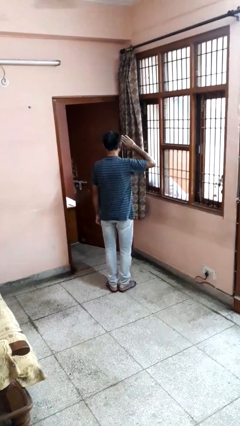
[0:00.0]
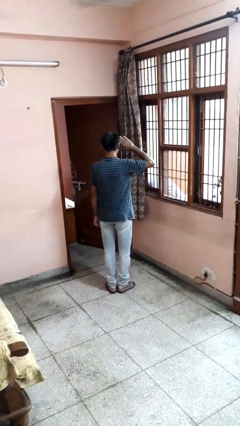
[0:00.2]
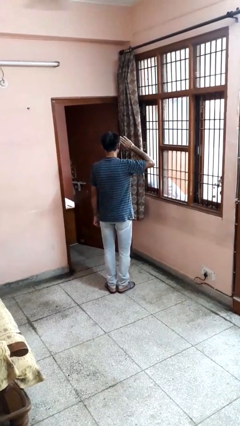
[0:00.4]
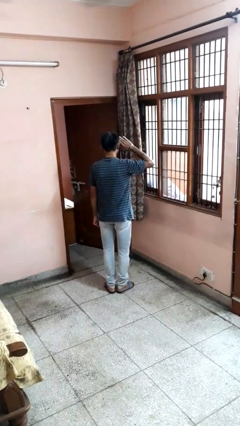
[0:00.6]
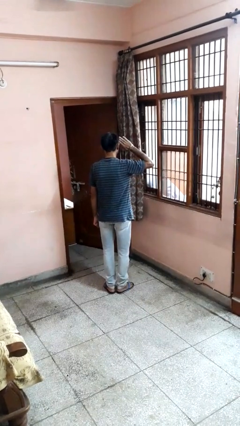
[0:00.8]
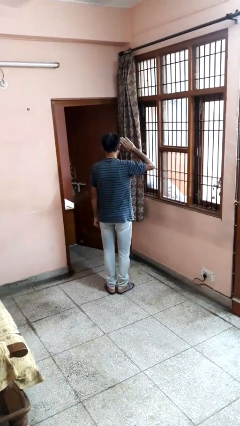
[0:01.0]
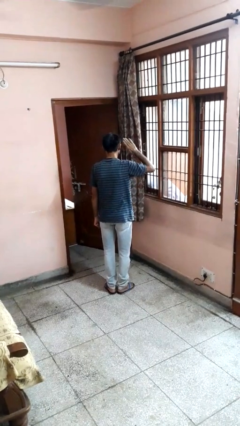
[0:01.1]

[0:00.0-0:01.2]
person salutes

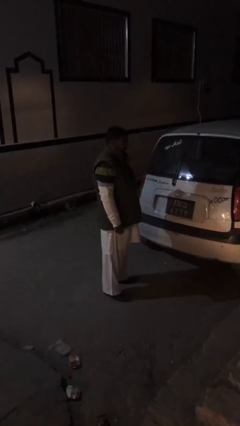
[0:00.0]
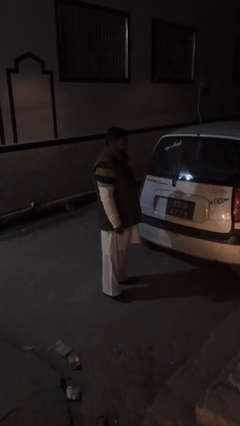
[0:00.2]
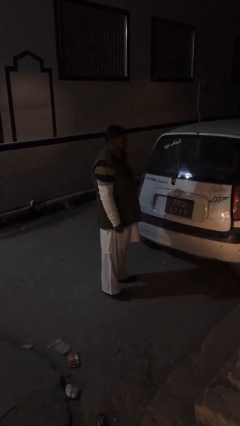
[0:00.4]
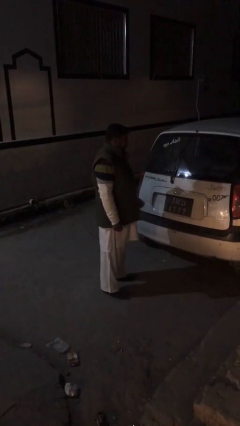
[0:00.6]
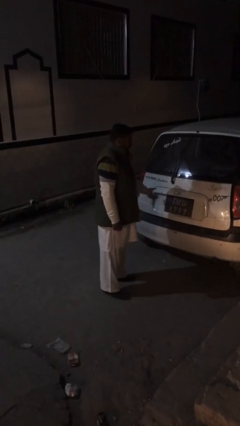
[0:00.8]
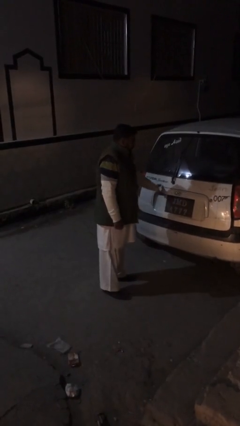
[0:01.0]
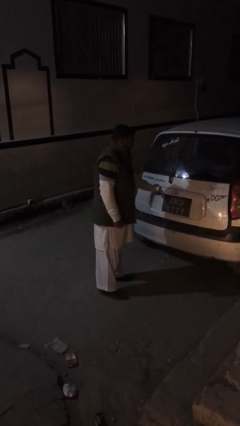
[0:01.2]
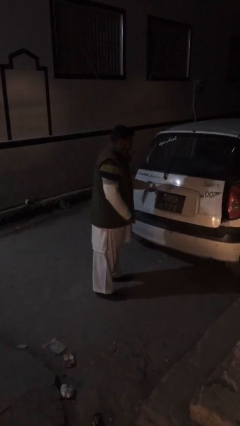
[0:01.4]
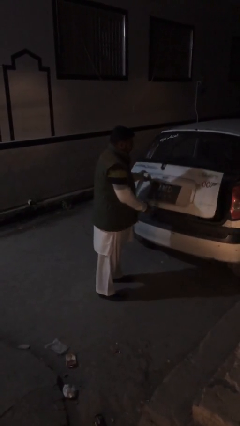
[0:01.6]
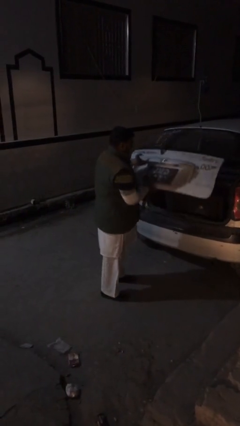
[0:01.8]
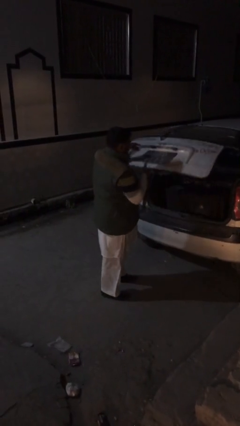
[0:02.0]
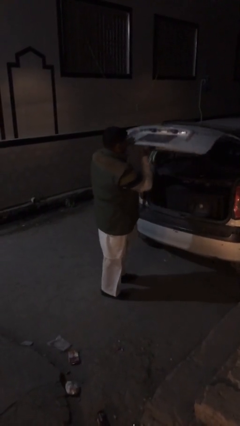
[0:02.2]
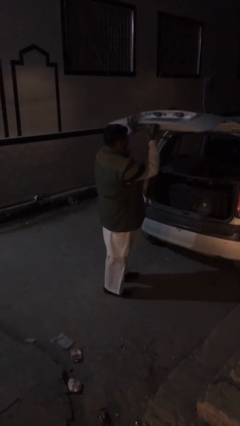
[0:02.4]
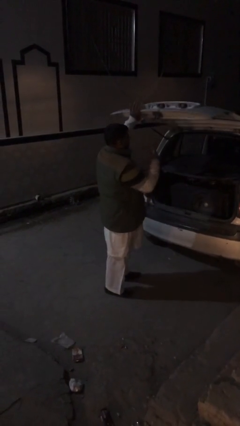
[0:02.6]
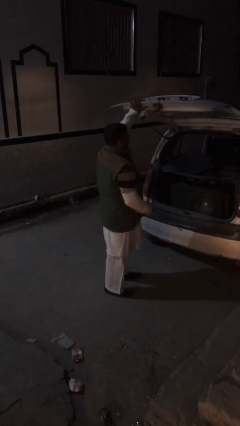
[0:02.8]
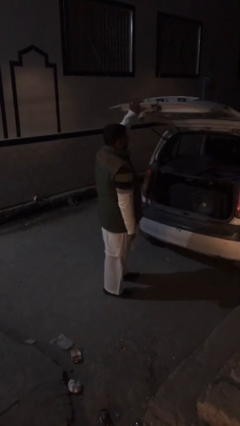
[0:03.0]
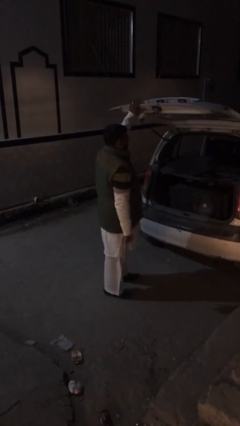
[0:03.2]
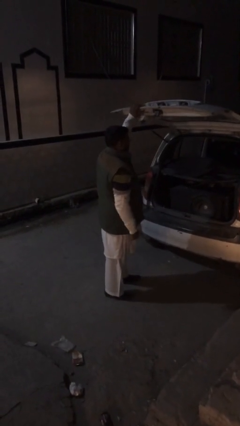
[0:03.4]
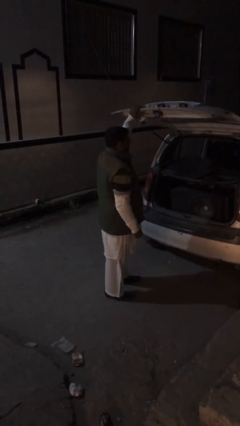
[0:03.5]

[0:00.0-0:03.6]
person opens car trunk

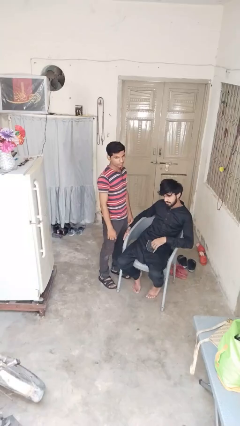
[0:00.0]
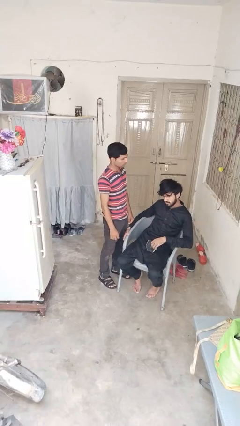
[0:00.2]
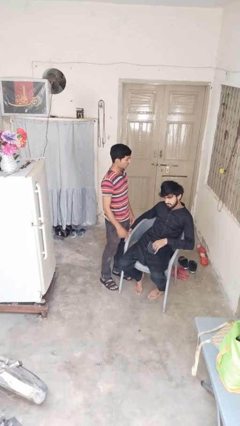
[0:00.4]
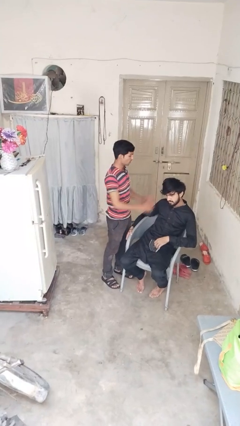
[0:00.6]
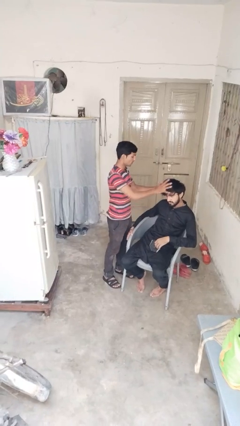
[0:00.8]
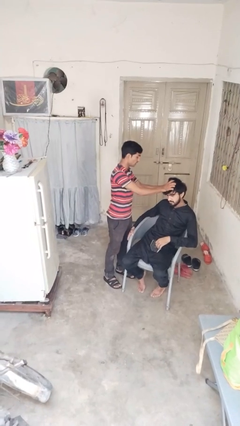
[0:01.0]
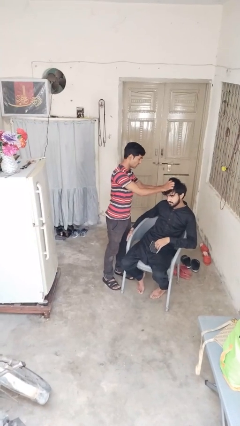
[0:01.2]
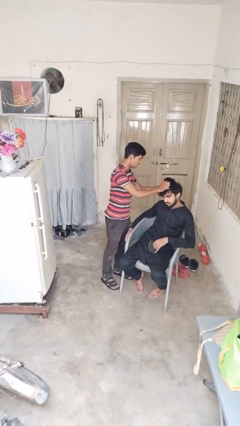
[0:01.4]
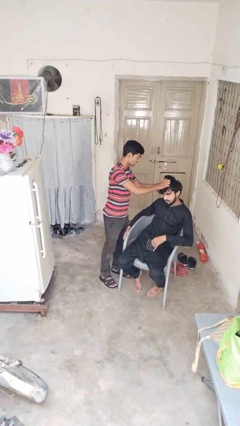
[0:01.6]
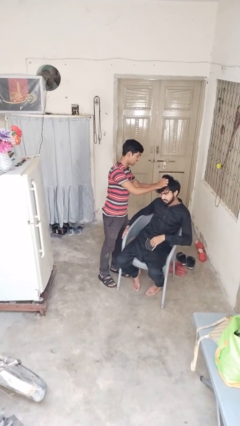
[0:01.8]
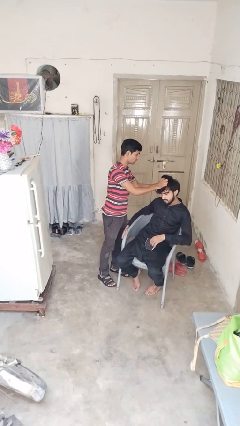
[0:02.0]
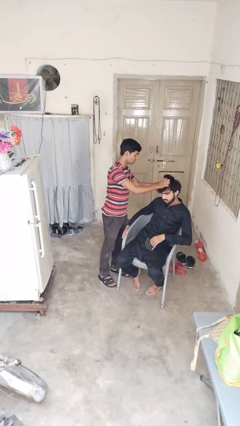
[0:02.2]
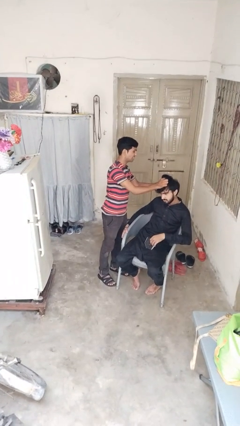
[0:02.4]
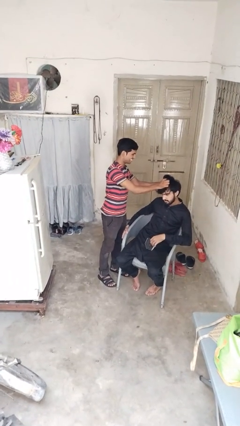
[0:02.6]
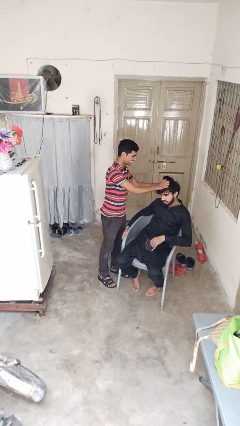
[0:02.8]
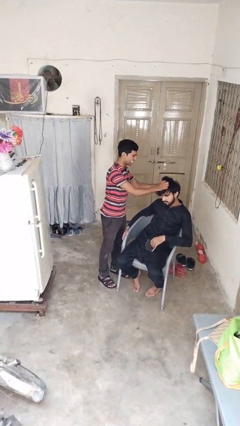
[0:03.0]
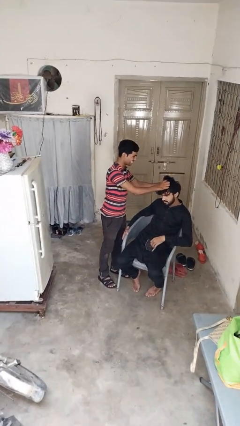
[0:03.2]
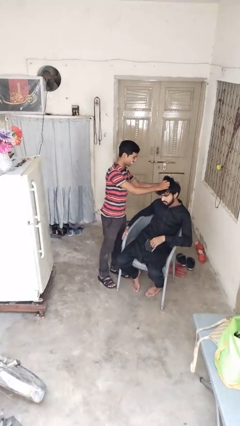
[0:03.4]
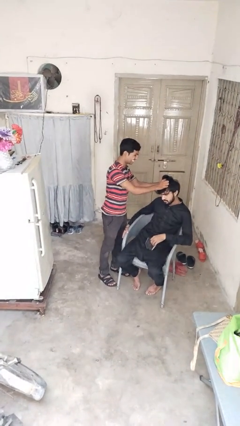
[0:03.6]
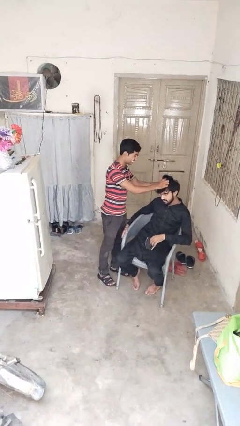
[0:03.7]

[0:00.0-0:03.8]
person grabs person by hair

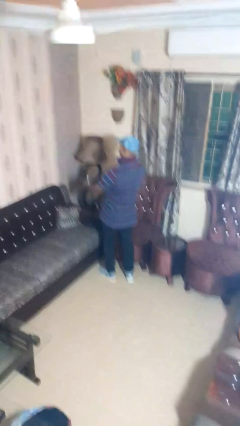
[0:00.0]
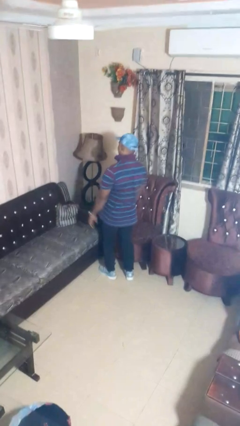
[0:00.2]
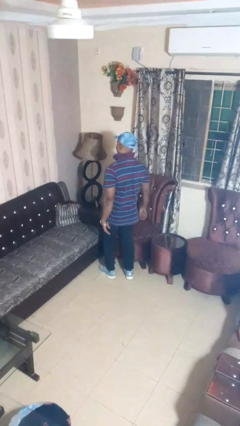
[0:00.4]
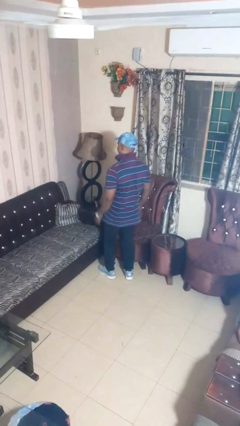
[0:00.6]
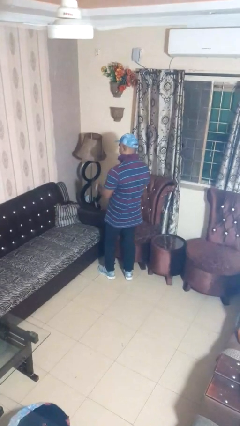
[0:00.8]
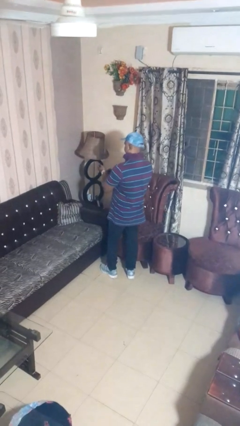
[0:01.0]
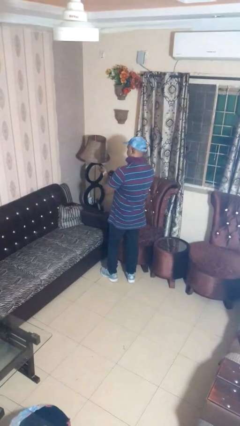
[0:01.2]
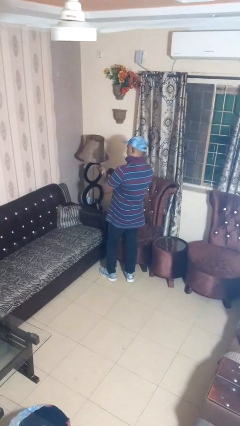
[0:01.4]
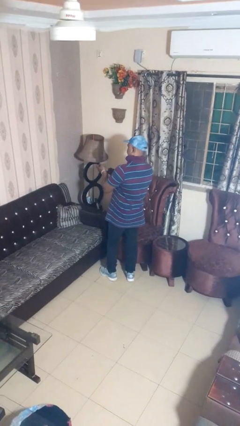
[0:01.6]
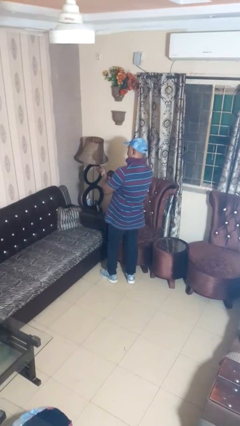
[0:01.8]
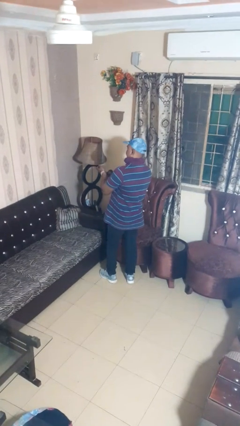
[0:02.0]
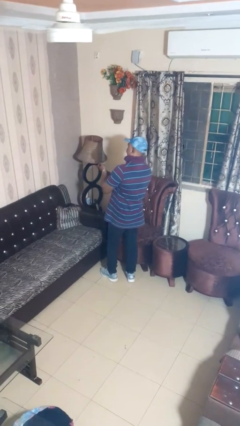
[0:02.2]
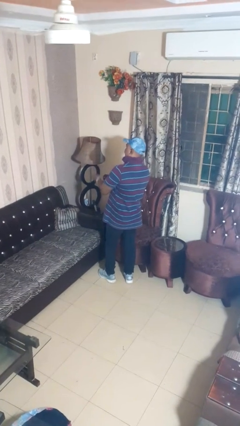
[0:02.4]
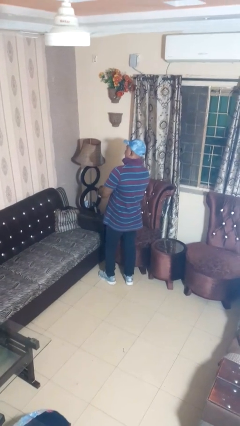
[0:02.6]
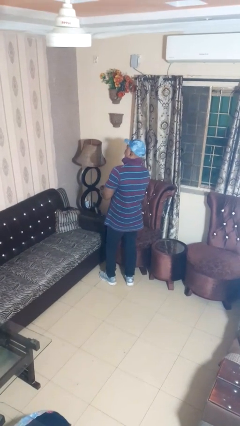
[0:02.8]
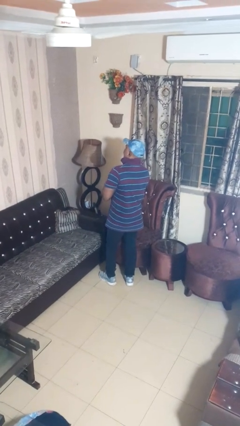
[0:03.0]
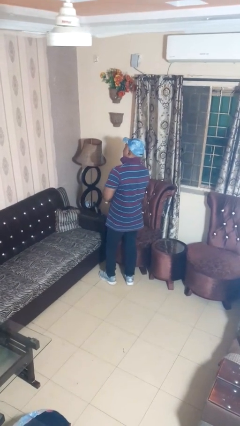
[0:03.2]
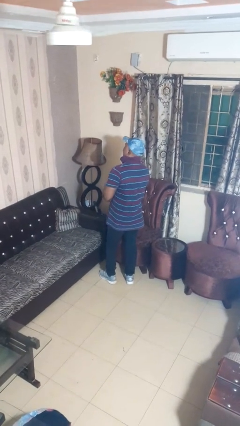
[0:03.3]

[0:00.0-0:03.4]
person takes off wristwatch

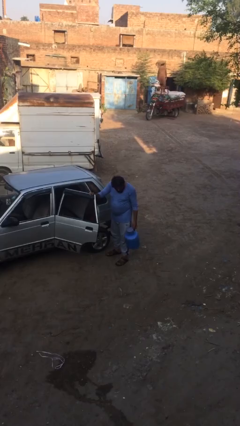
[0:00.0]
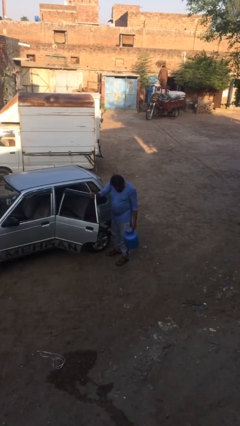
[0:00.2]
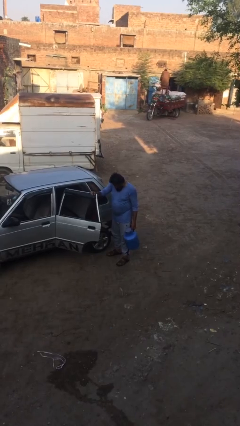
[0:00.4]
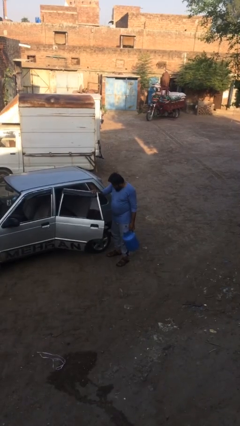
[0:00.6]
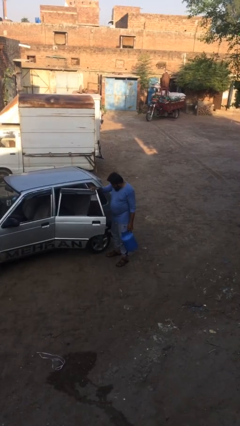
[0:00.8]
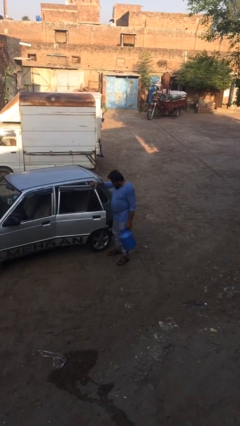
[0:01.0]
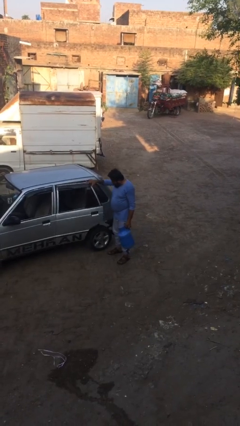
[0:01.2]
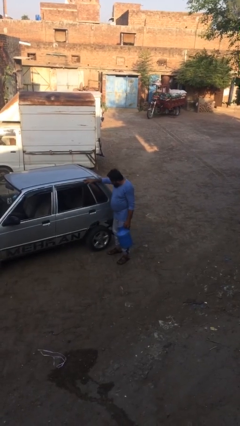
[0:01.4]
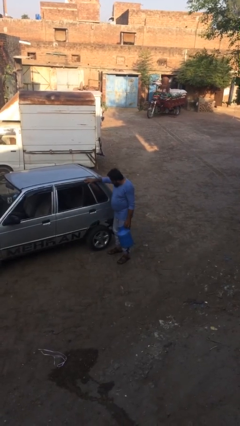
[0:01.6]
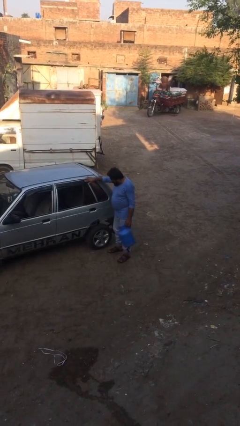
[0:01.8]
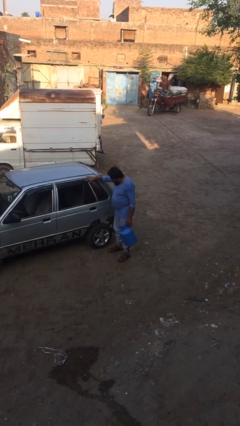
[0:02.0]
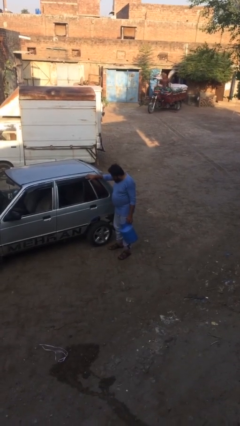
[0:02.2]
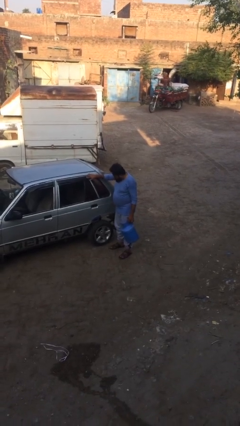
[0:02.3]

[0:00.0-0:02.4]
person closes car door

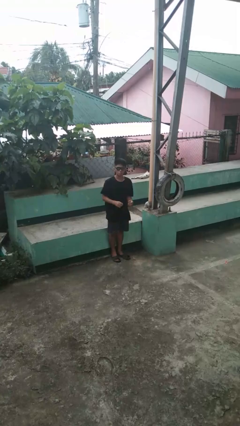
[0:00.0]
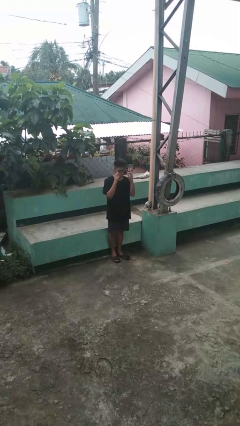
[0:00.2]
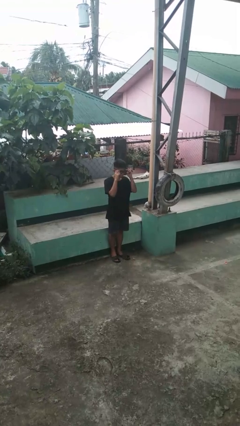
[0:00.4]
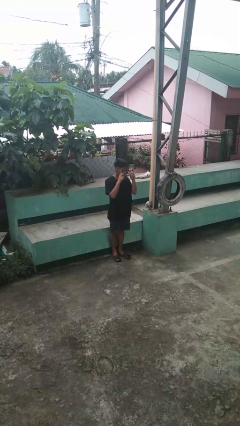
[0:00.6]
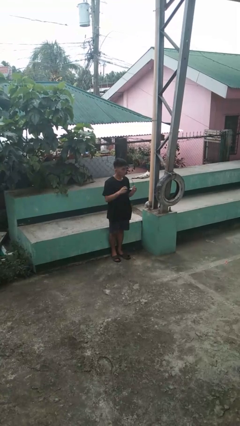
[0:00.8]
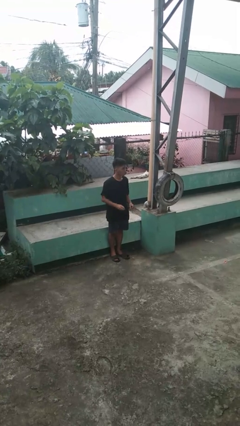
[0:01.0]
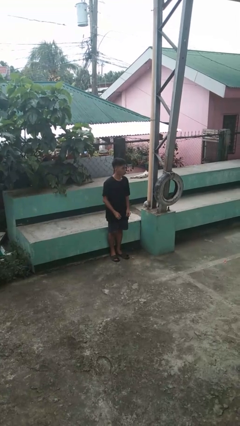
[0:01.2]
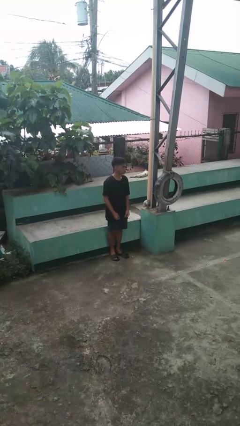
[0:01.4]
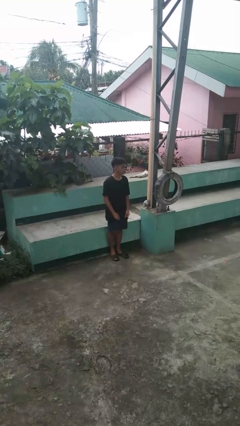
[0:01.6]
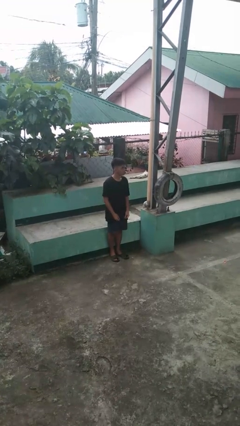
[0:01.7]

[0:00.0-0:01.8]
person takes off sunglasses

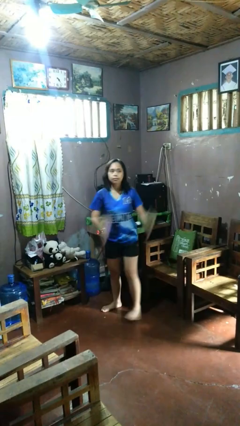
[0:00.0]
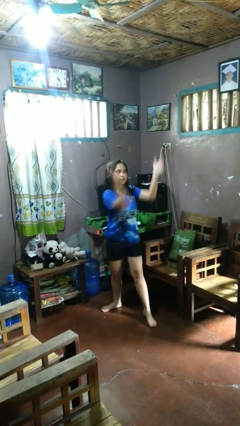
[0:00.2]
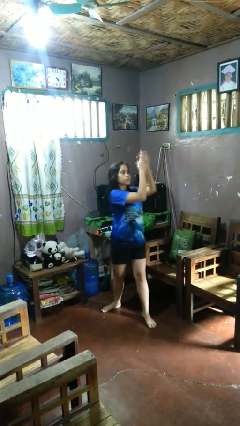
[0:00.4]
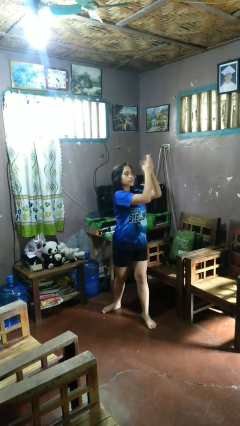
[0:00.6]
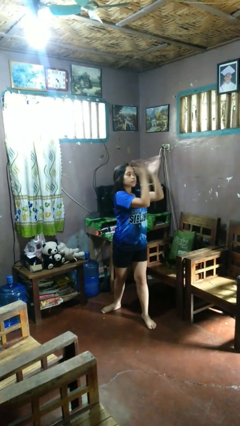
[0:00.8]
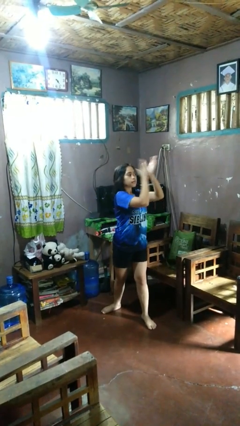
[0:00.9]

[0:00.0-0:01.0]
person claps hands
